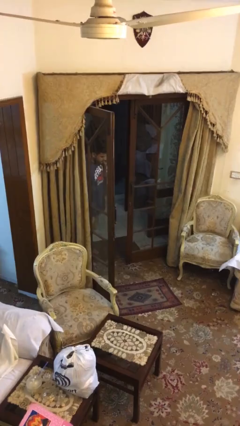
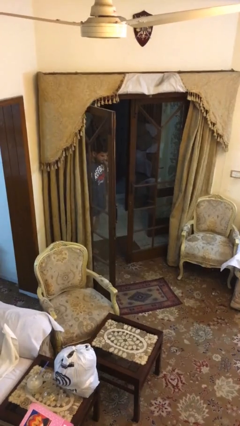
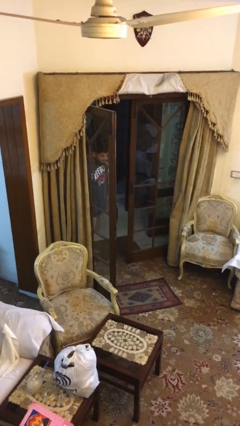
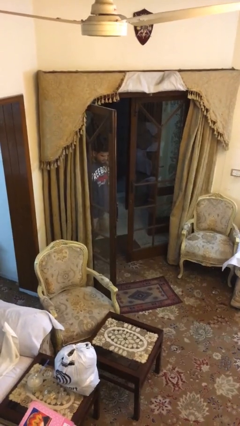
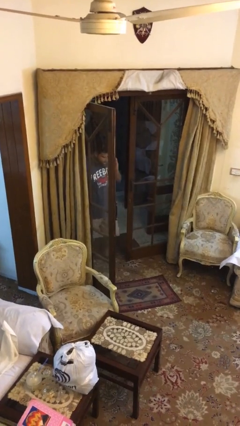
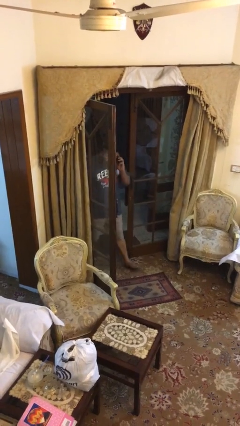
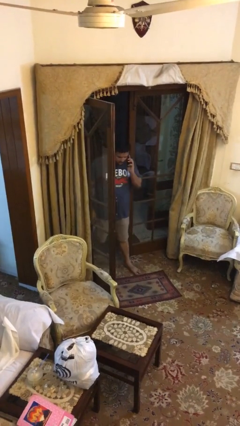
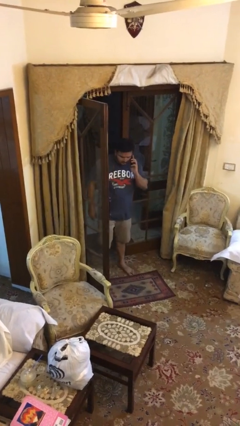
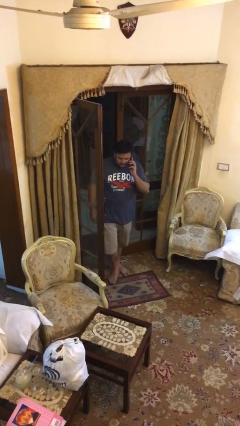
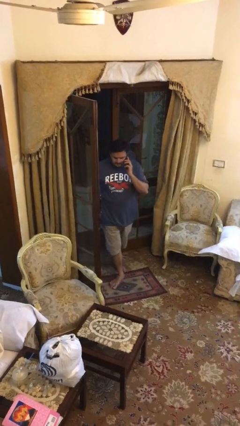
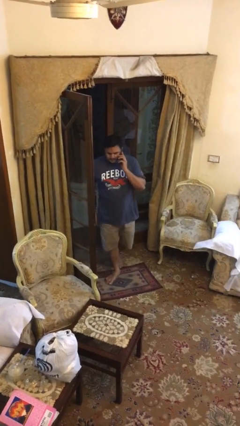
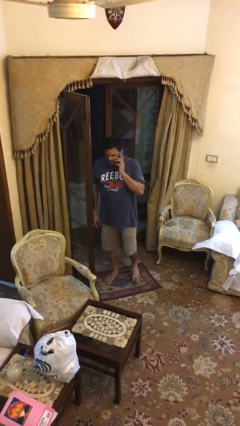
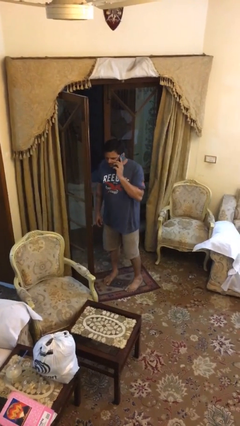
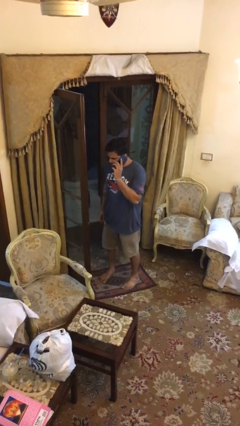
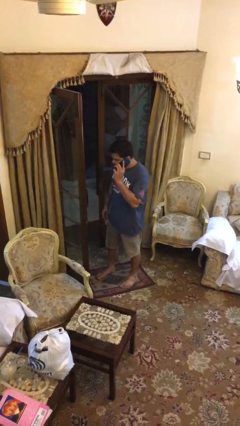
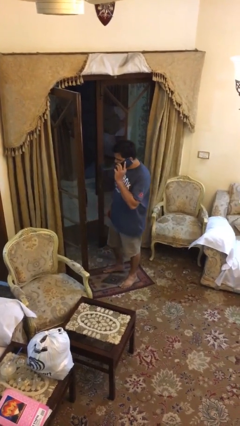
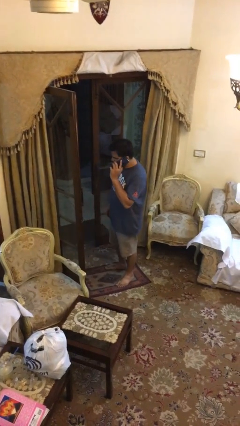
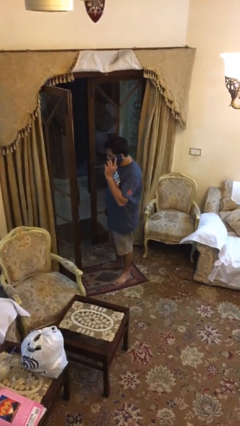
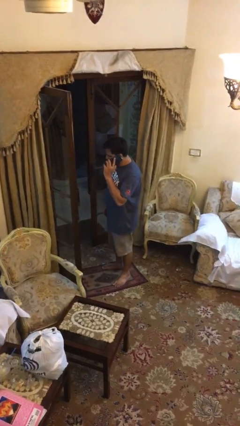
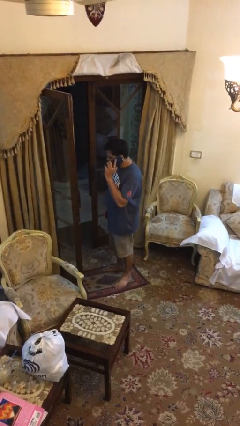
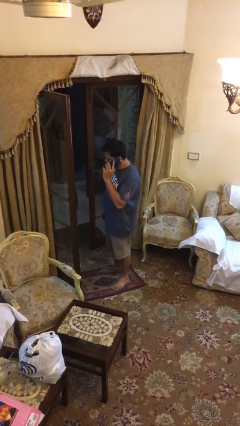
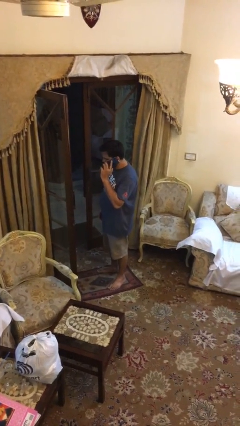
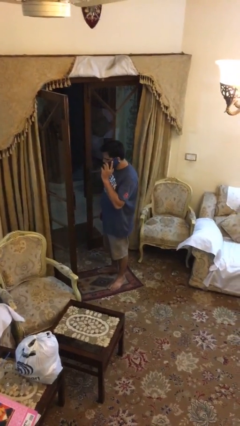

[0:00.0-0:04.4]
person enters scene through structure

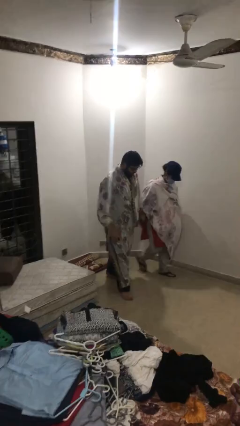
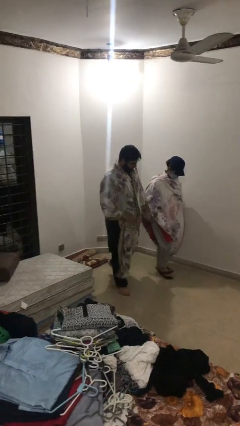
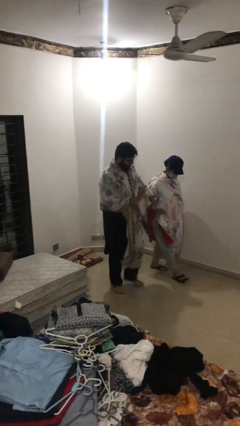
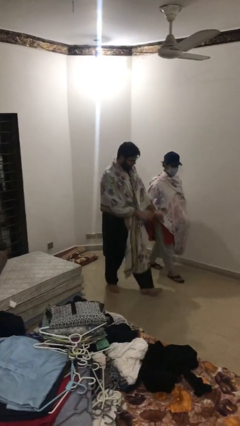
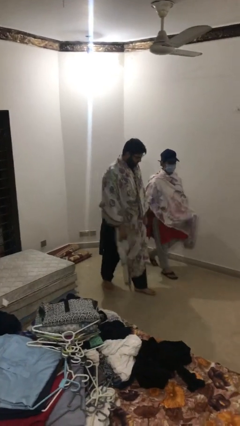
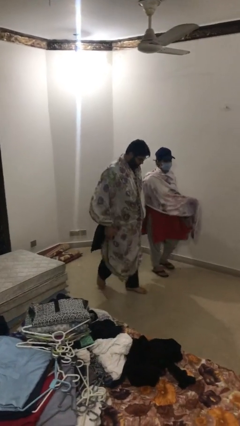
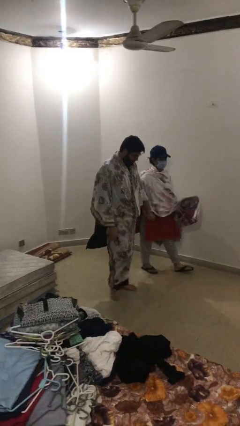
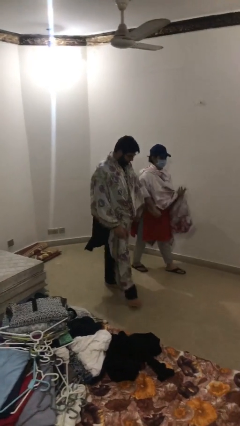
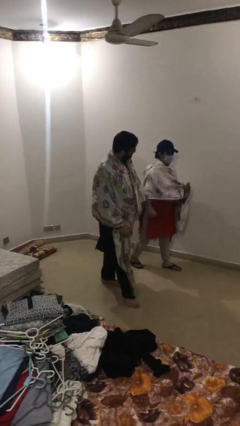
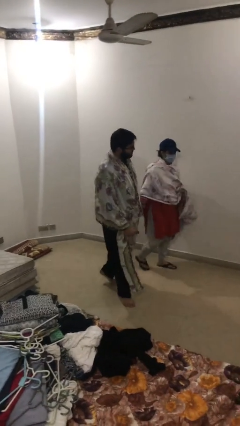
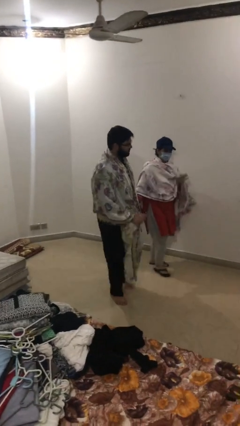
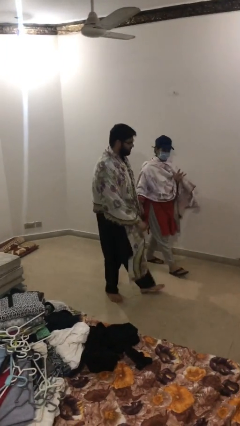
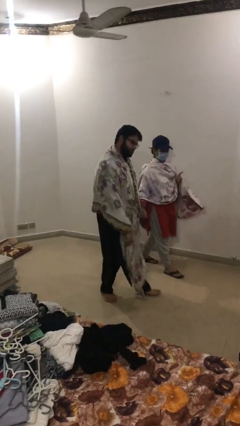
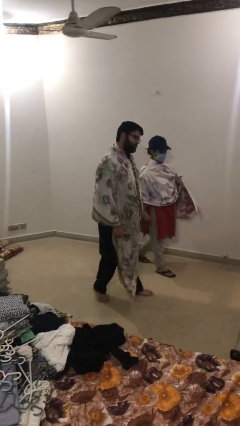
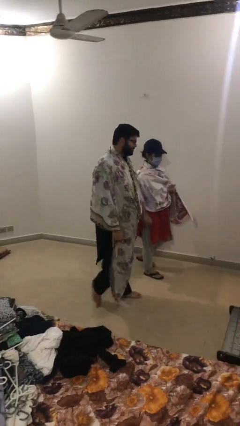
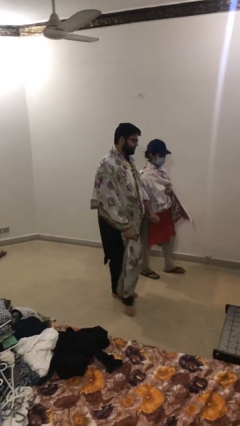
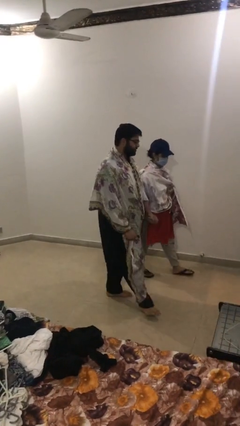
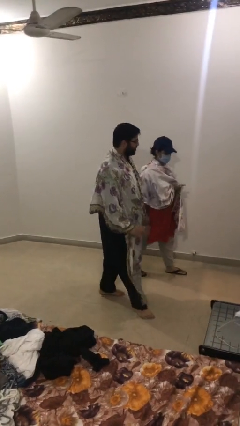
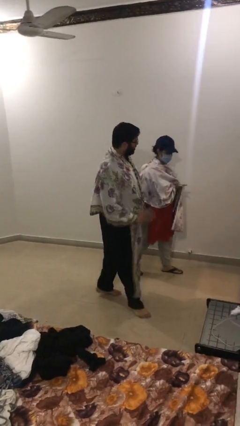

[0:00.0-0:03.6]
person holds hand

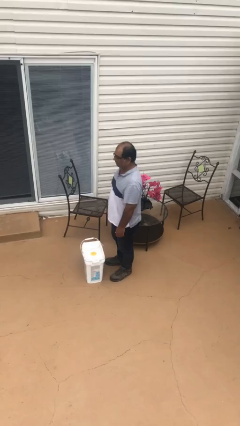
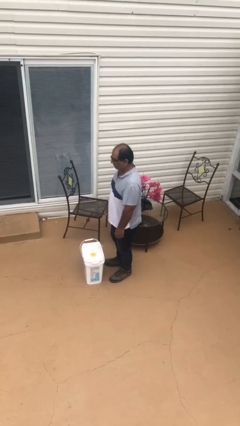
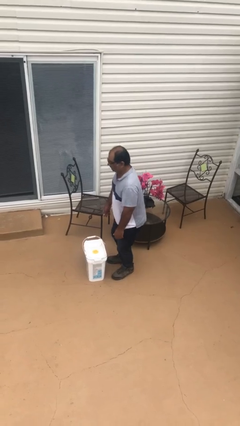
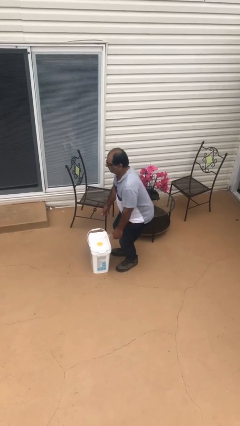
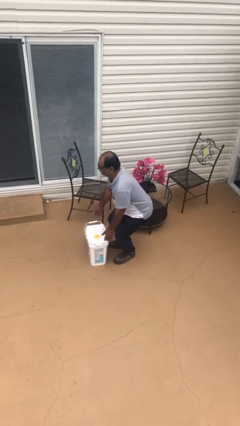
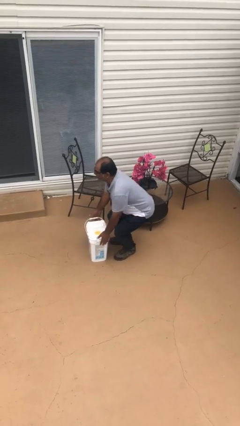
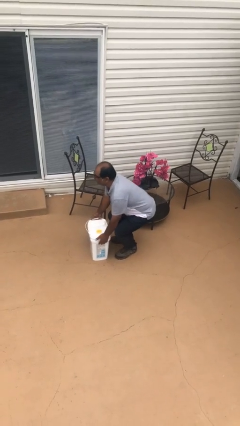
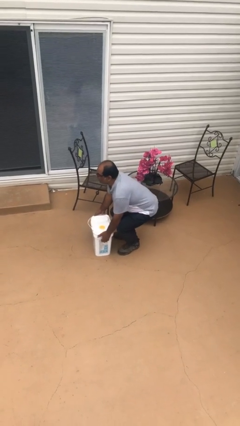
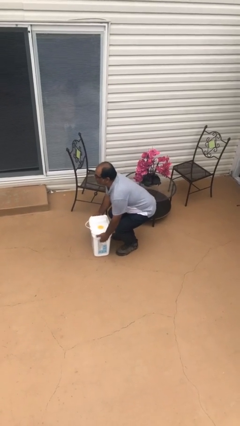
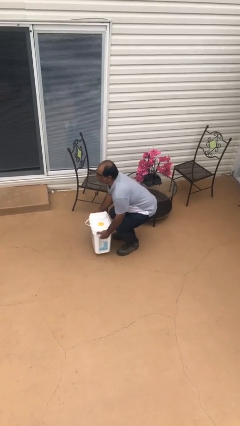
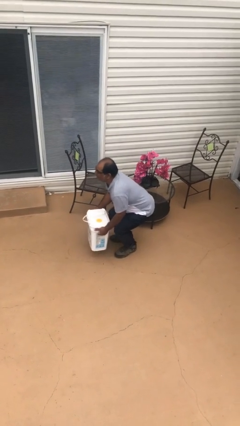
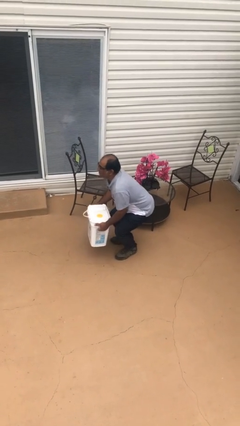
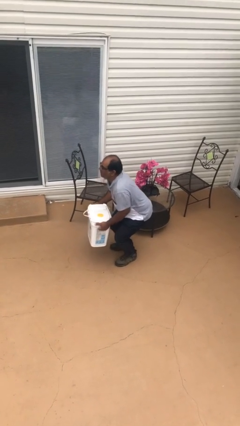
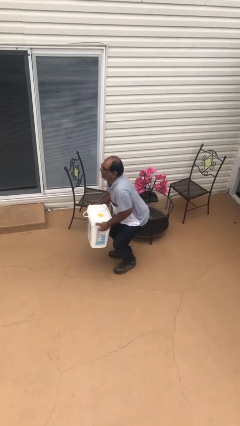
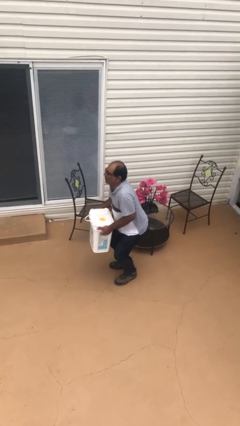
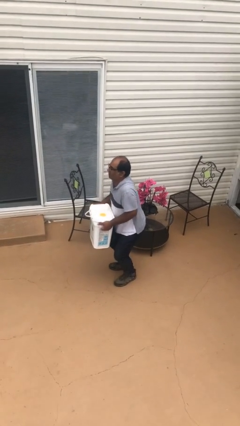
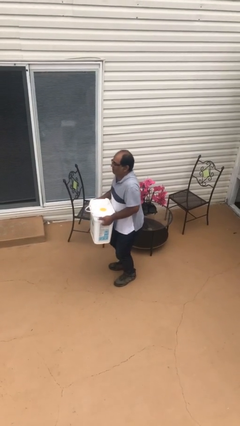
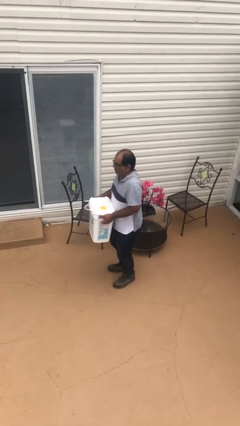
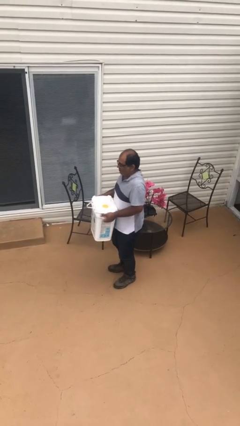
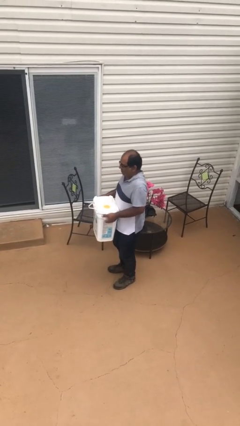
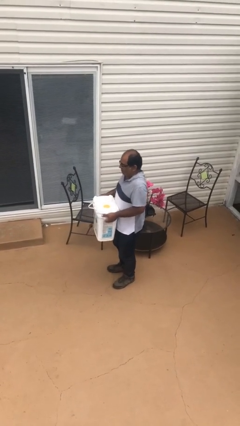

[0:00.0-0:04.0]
person picks up object from floor

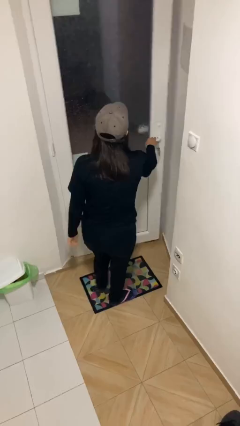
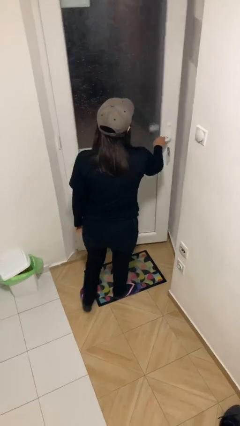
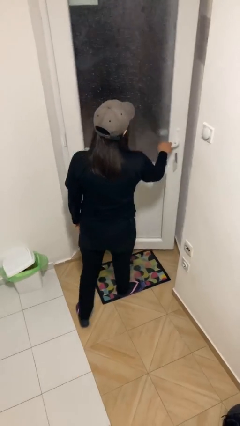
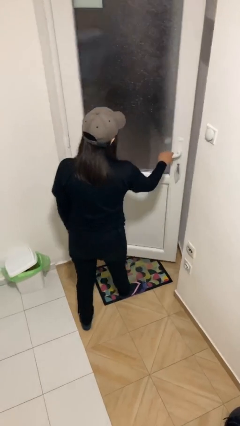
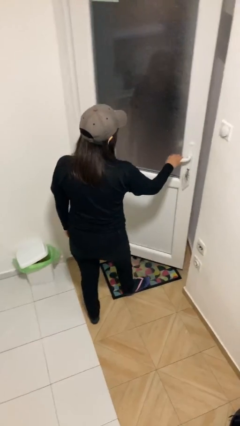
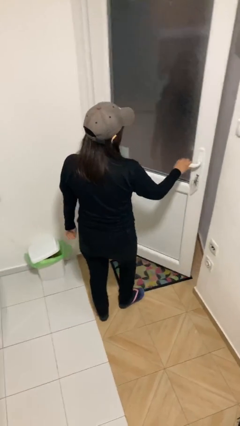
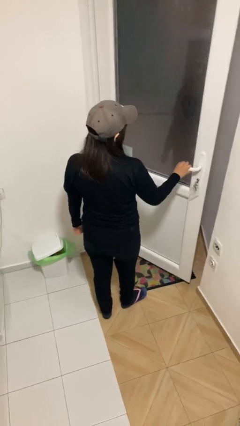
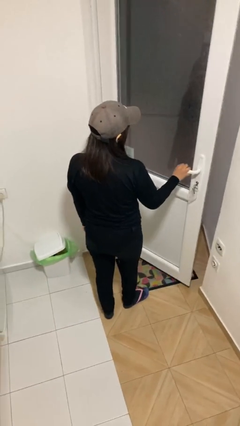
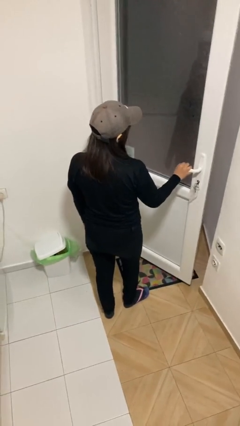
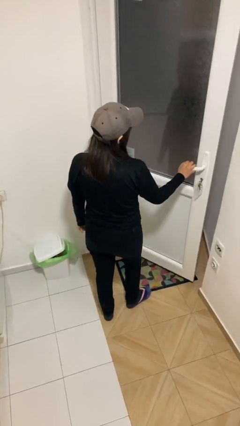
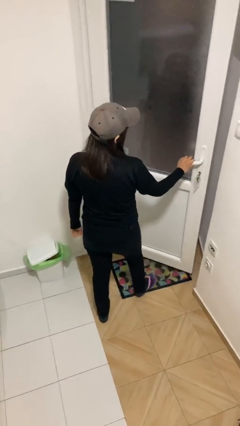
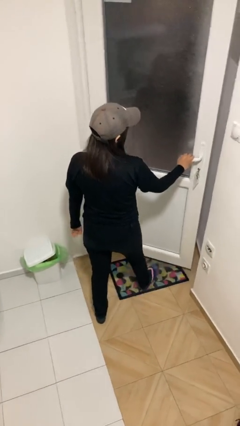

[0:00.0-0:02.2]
person opens facility door

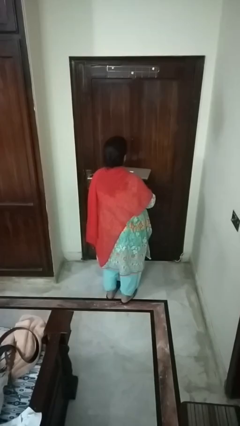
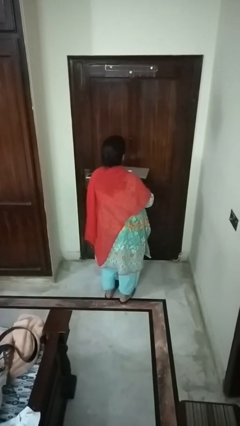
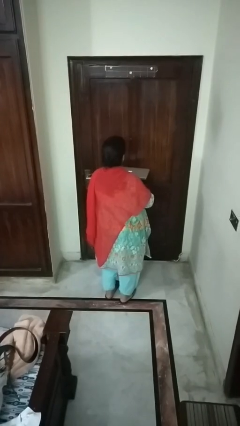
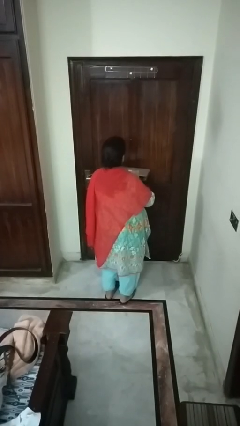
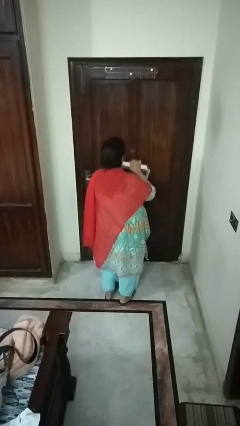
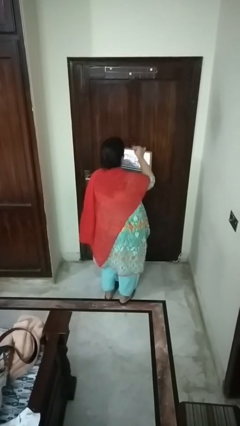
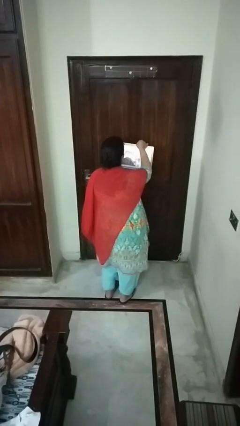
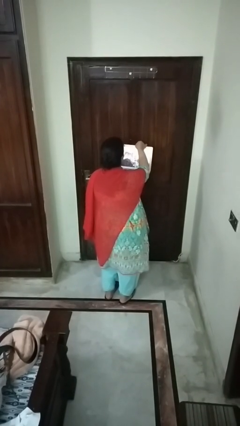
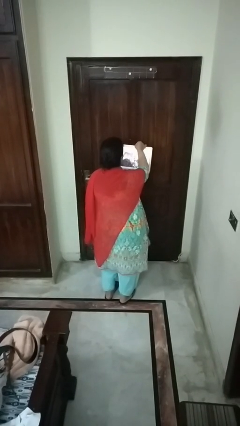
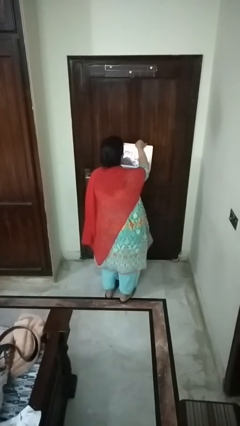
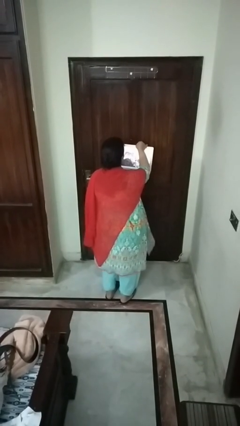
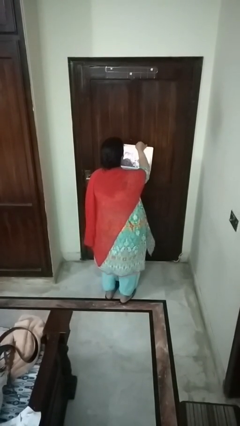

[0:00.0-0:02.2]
person opens laptop
